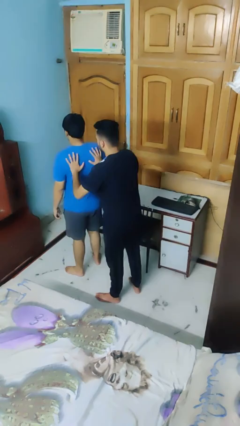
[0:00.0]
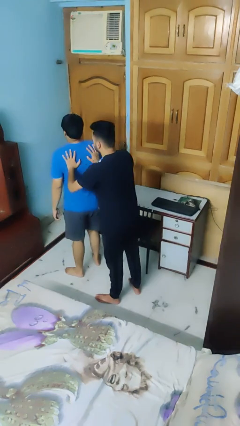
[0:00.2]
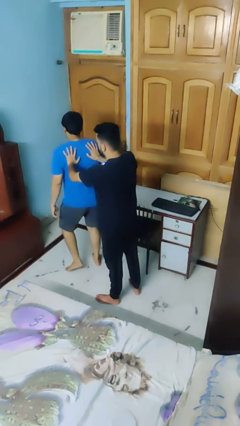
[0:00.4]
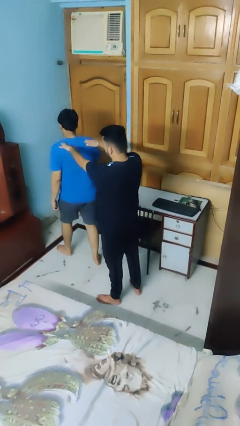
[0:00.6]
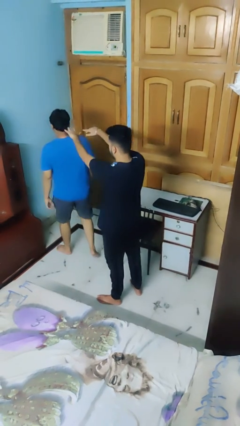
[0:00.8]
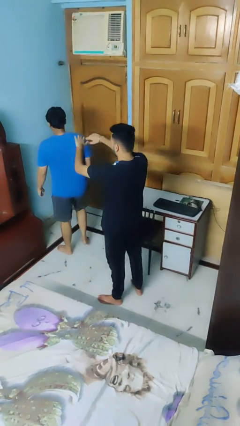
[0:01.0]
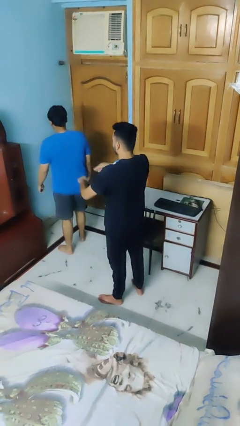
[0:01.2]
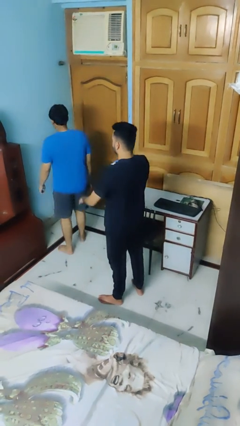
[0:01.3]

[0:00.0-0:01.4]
person shoves person

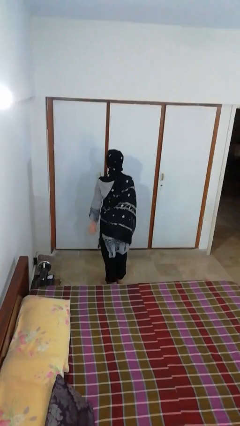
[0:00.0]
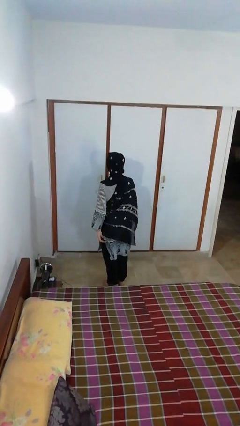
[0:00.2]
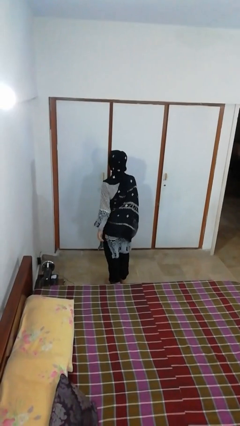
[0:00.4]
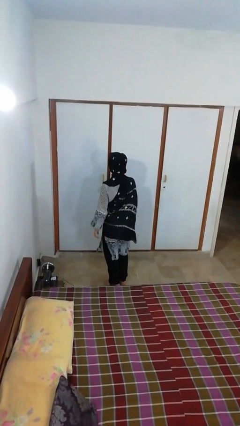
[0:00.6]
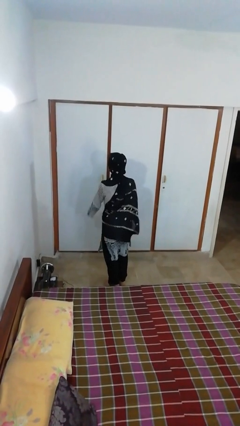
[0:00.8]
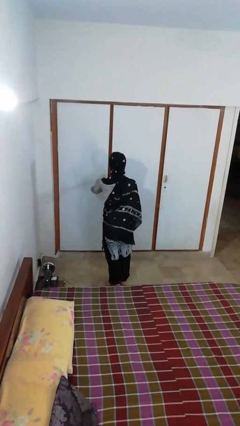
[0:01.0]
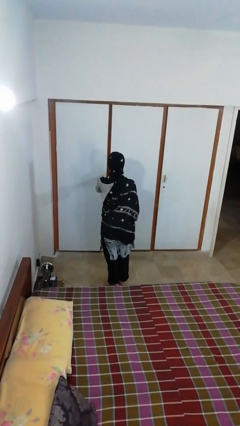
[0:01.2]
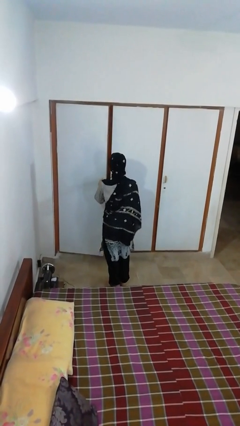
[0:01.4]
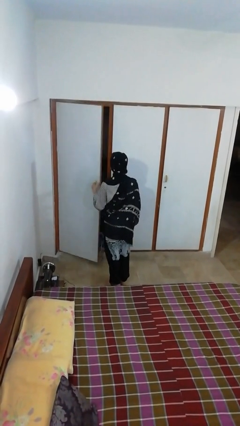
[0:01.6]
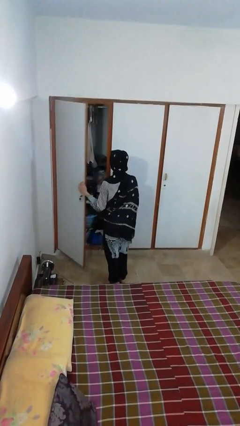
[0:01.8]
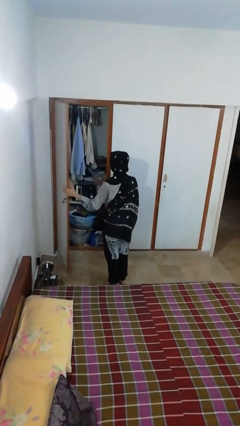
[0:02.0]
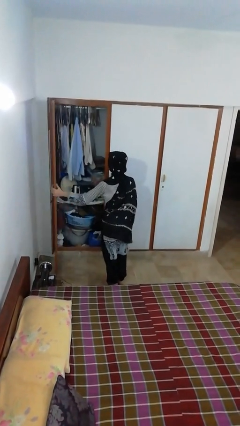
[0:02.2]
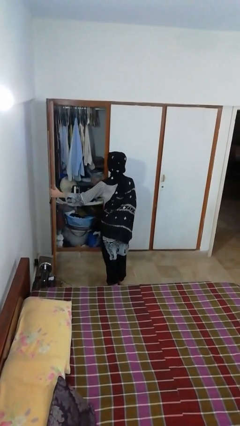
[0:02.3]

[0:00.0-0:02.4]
person opens closet door

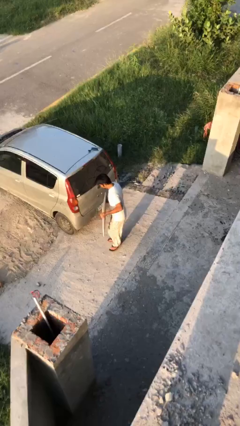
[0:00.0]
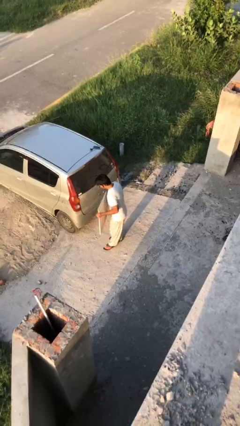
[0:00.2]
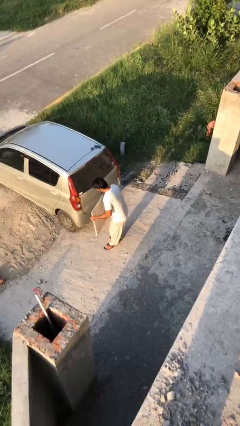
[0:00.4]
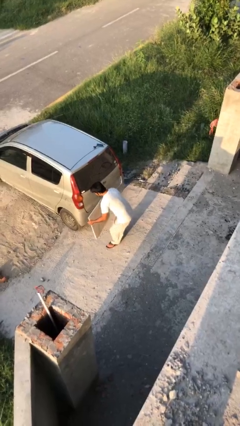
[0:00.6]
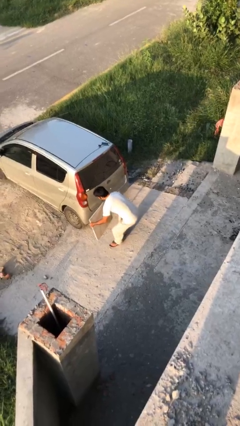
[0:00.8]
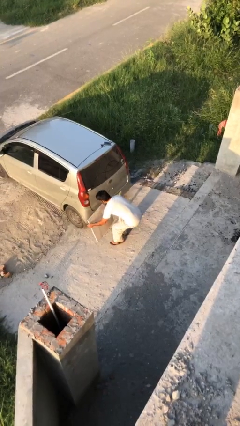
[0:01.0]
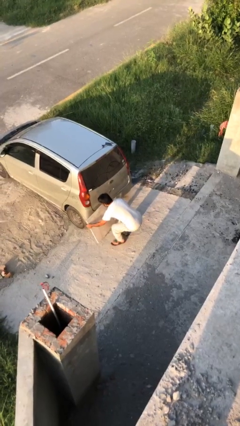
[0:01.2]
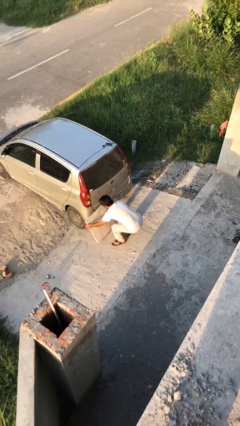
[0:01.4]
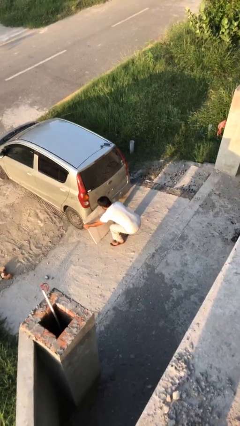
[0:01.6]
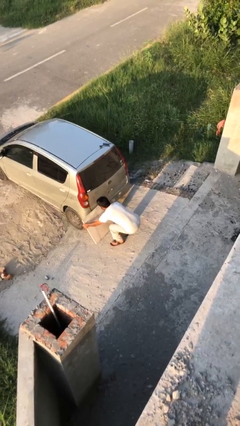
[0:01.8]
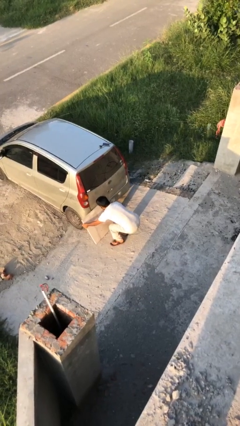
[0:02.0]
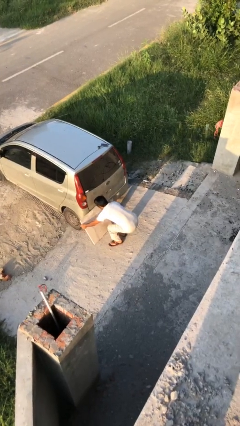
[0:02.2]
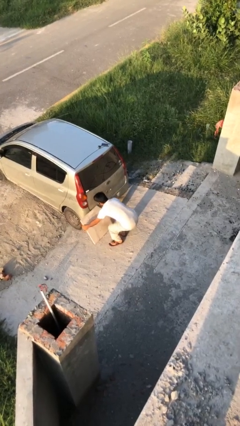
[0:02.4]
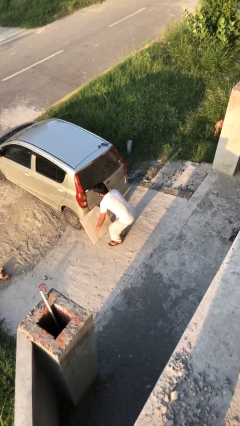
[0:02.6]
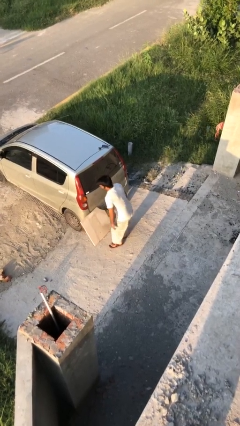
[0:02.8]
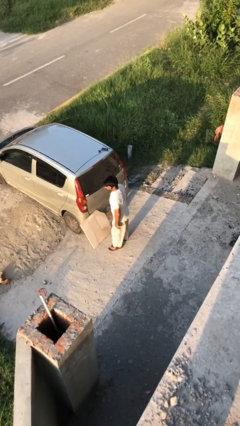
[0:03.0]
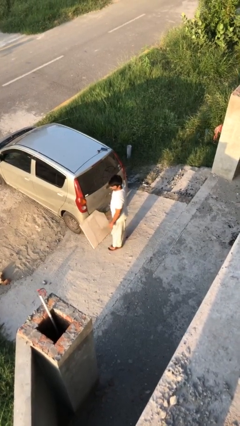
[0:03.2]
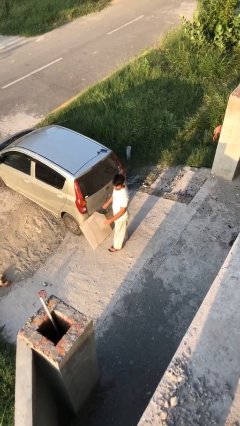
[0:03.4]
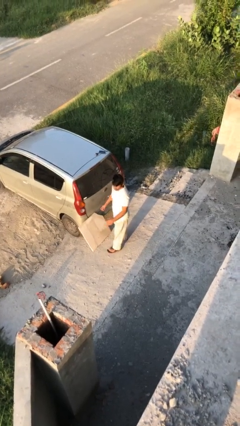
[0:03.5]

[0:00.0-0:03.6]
person puts down object on floor

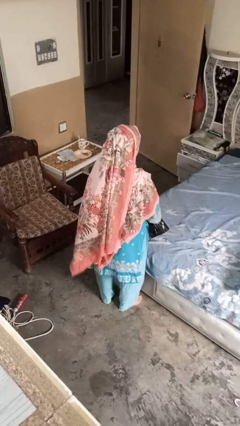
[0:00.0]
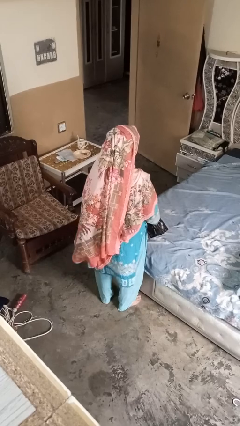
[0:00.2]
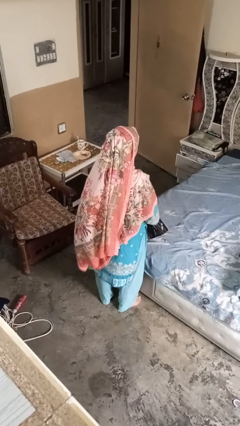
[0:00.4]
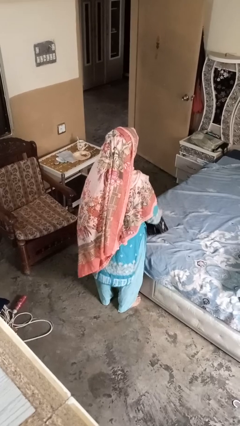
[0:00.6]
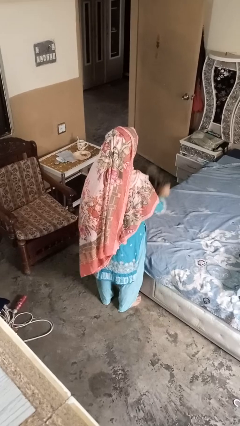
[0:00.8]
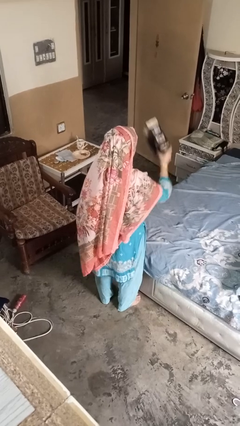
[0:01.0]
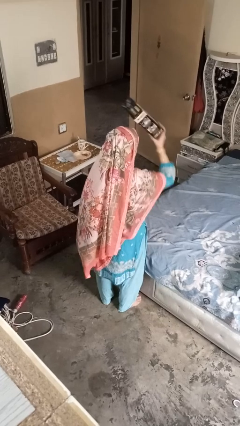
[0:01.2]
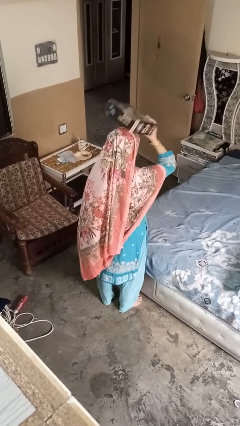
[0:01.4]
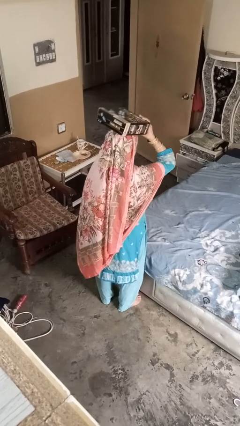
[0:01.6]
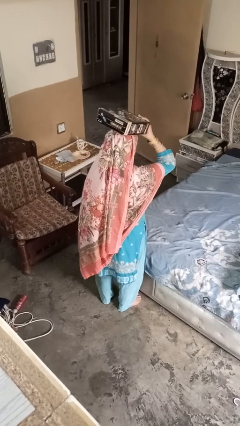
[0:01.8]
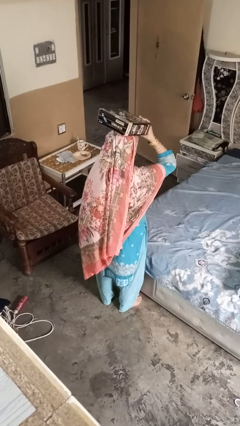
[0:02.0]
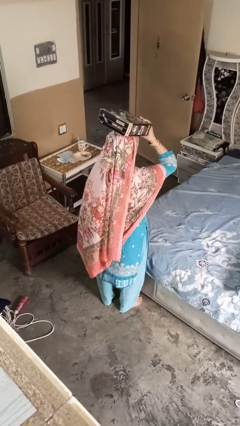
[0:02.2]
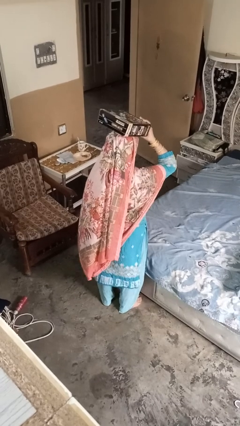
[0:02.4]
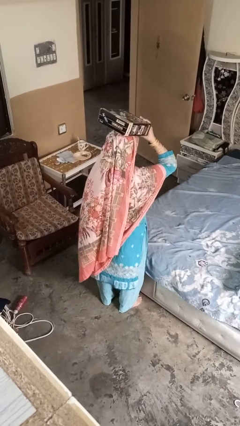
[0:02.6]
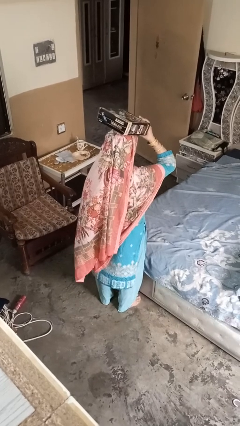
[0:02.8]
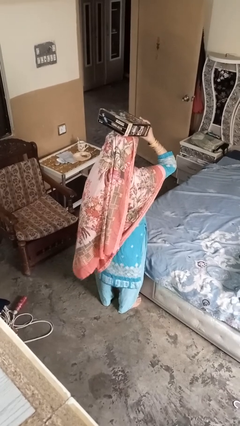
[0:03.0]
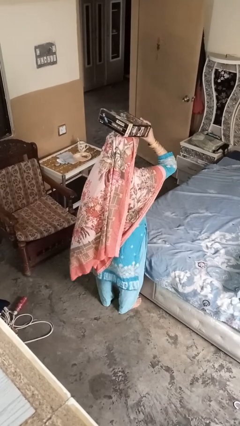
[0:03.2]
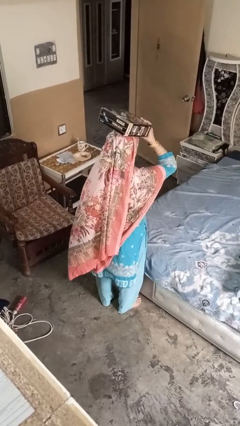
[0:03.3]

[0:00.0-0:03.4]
person holds object above head

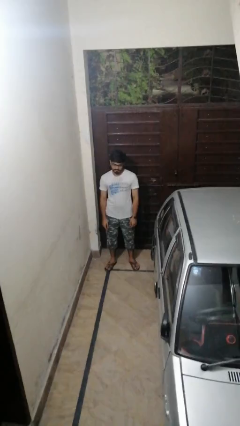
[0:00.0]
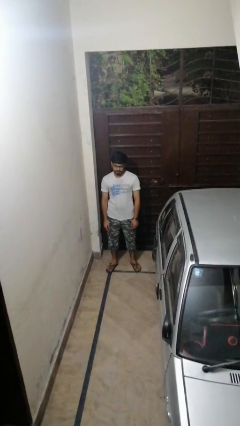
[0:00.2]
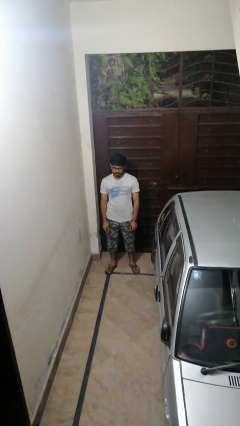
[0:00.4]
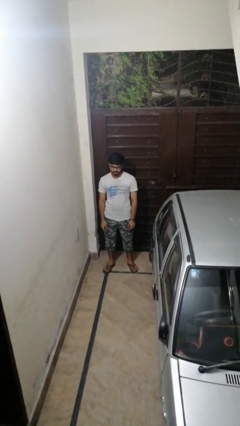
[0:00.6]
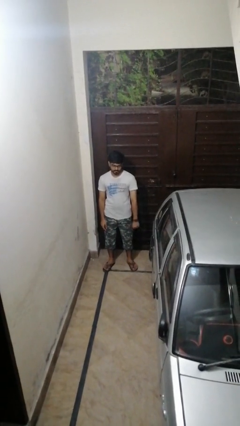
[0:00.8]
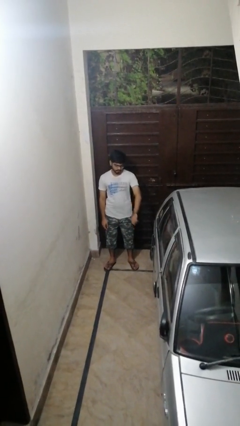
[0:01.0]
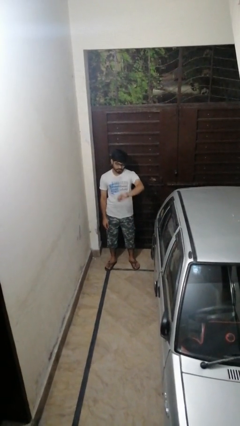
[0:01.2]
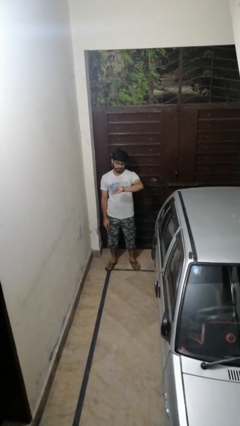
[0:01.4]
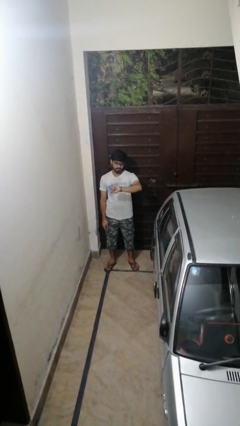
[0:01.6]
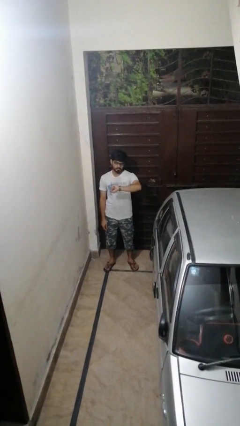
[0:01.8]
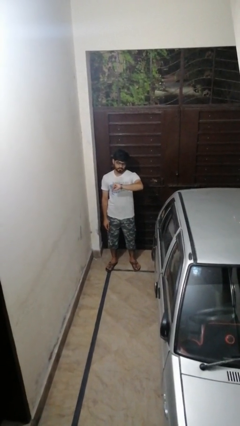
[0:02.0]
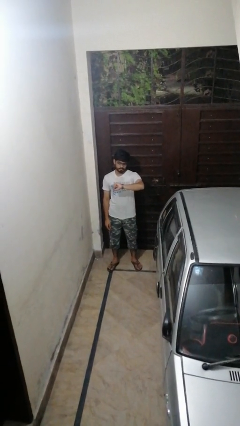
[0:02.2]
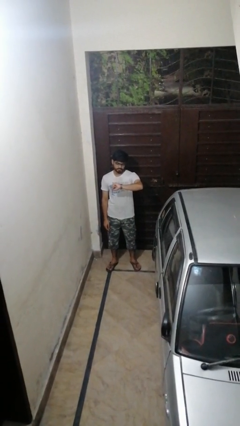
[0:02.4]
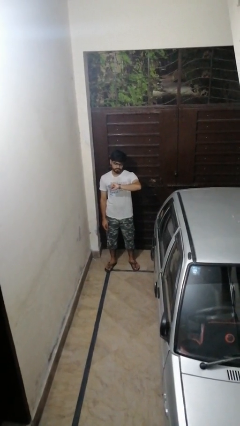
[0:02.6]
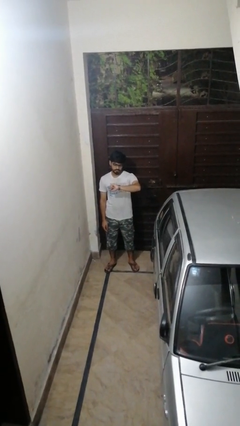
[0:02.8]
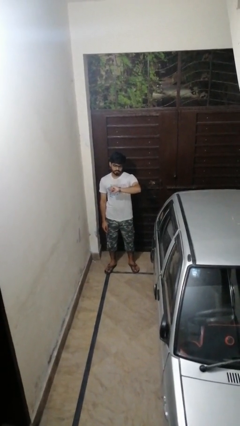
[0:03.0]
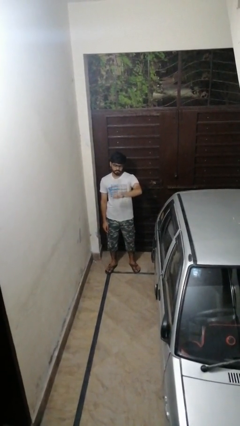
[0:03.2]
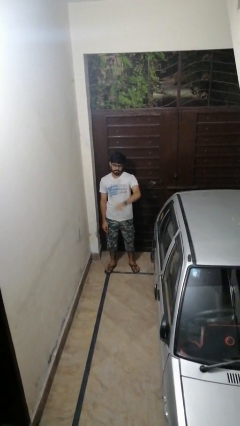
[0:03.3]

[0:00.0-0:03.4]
person looks at wristwatch

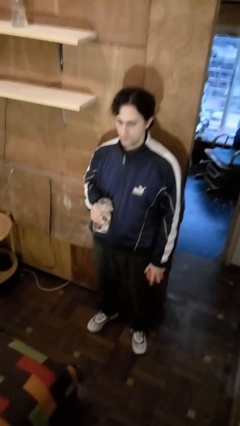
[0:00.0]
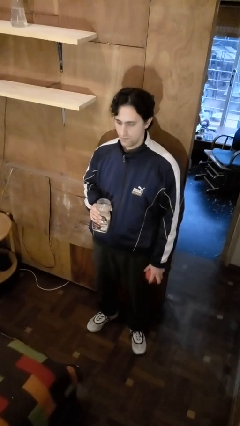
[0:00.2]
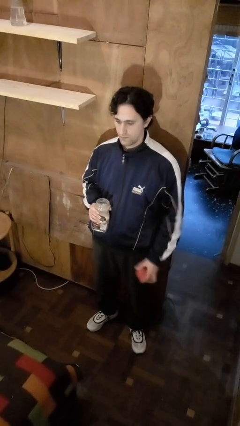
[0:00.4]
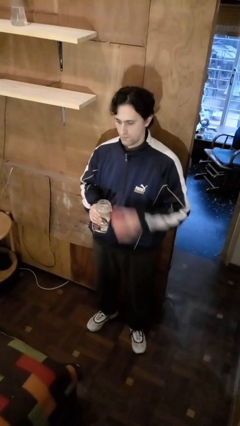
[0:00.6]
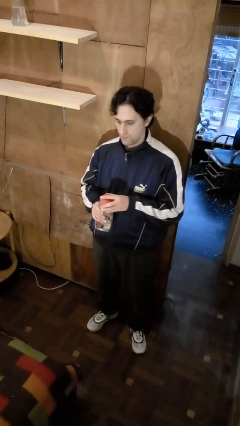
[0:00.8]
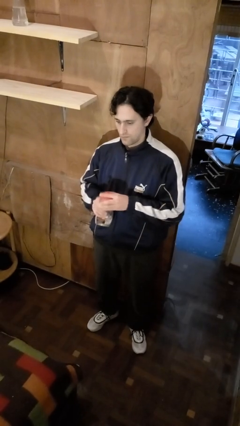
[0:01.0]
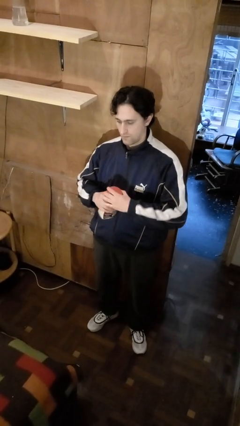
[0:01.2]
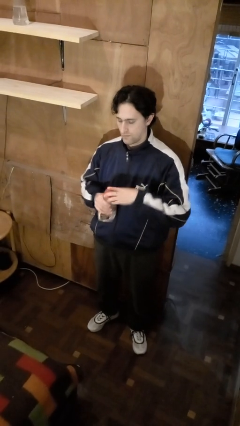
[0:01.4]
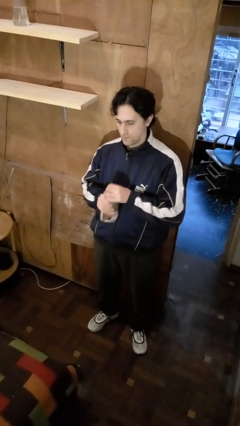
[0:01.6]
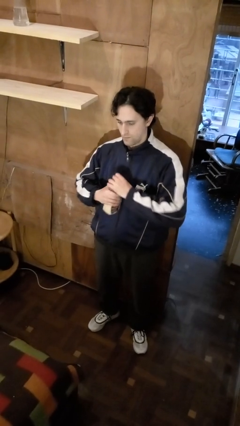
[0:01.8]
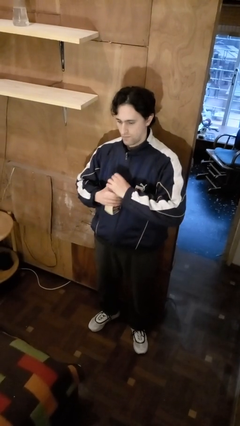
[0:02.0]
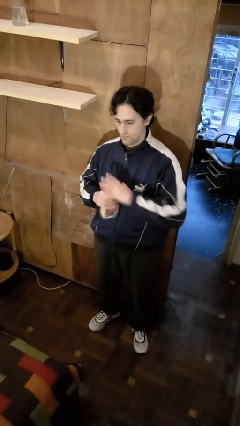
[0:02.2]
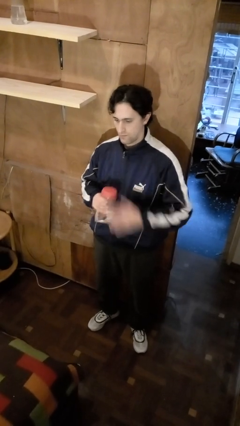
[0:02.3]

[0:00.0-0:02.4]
person closes jar

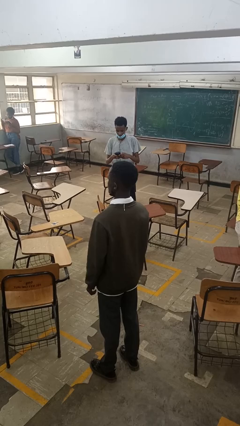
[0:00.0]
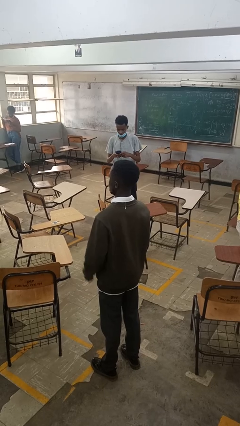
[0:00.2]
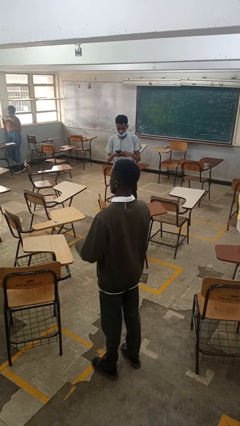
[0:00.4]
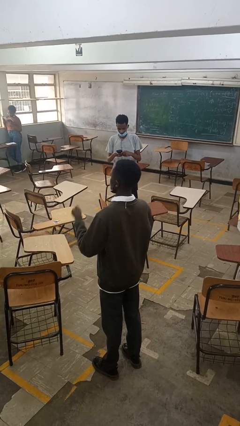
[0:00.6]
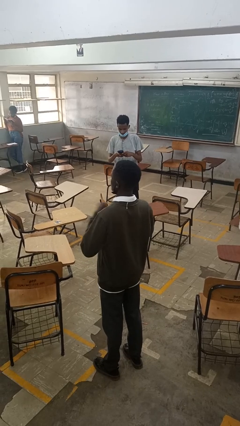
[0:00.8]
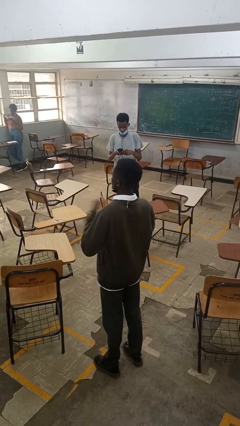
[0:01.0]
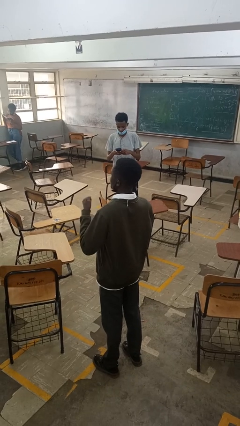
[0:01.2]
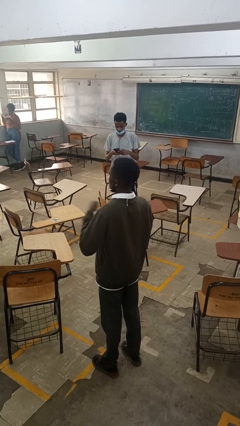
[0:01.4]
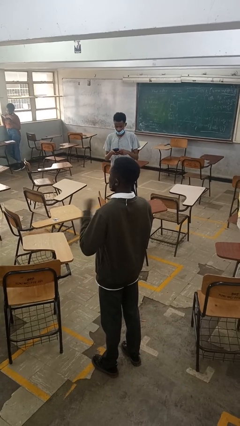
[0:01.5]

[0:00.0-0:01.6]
person drums on chest
